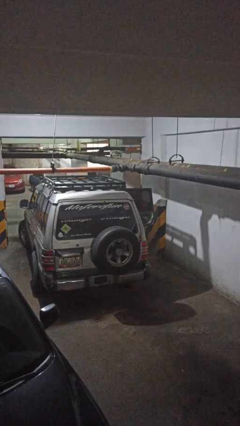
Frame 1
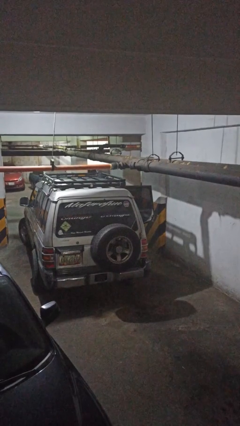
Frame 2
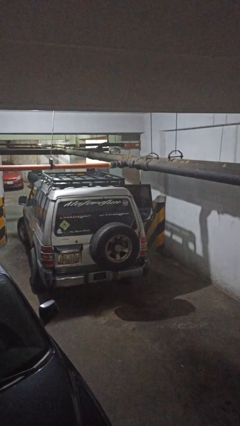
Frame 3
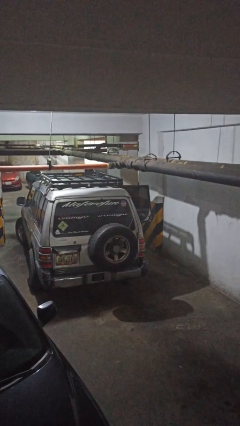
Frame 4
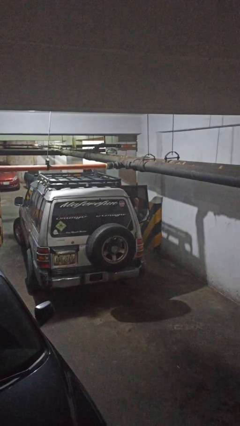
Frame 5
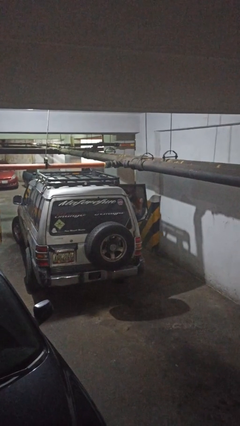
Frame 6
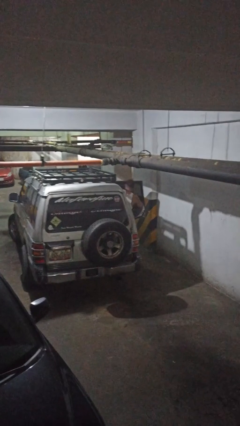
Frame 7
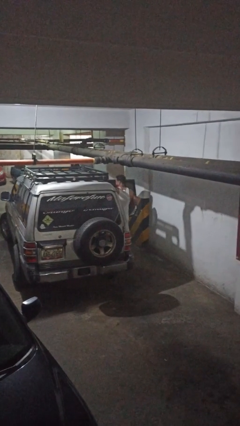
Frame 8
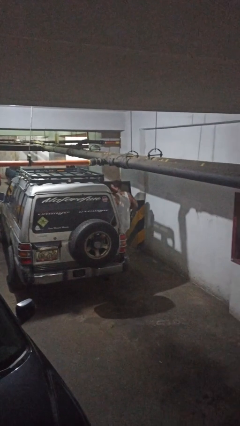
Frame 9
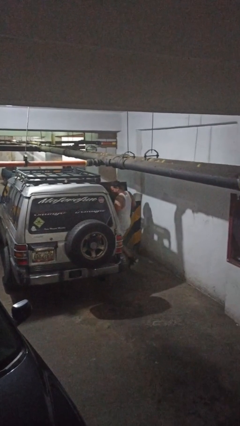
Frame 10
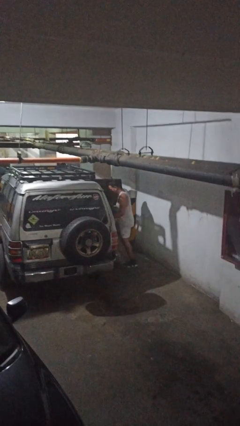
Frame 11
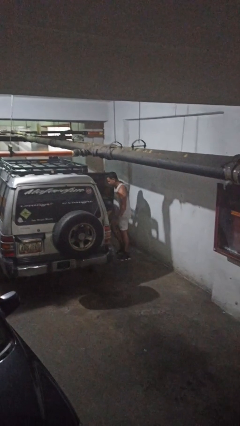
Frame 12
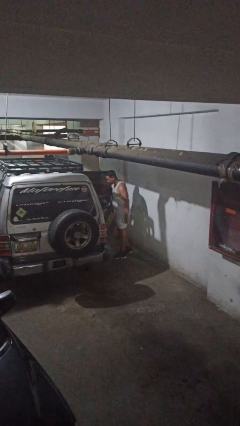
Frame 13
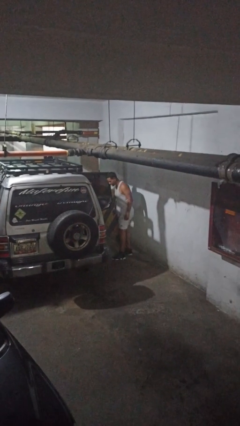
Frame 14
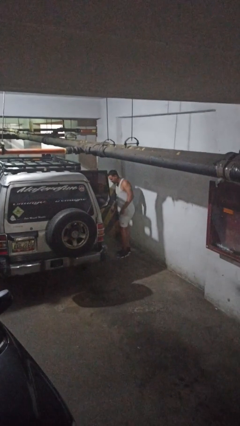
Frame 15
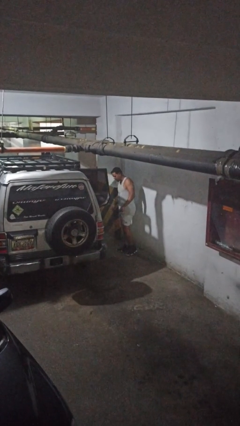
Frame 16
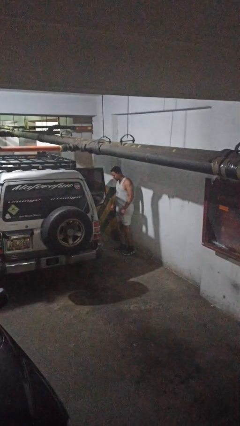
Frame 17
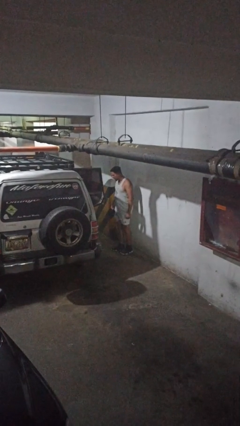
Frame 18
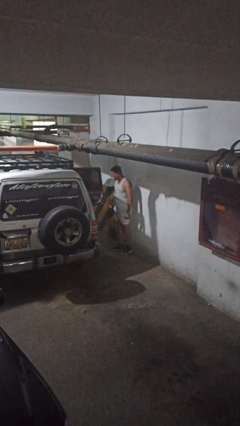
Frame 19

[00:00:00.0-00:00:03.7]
person exits car

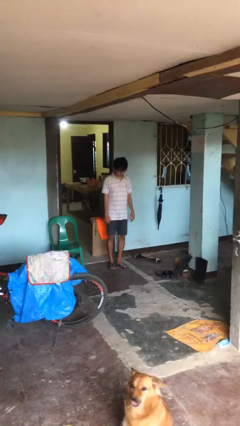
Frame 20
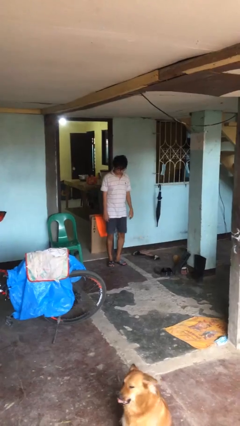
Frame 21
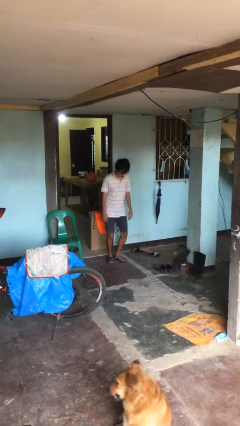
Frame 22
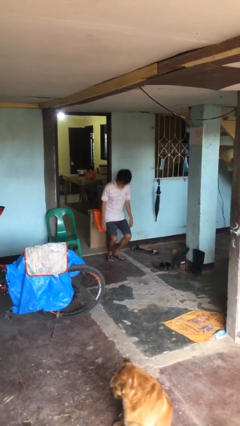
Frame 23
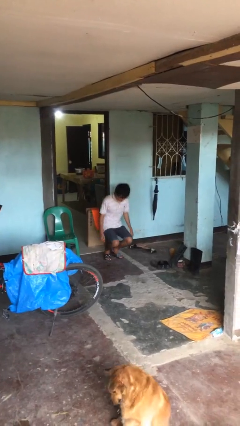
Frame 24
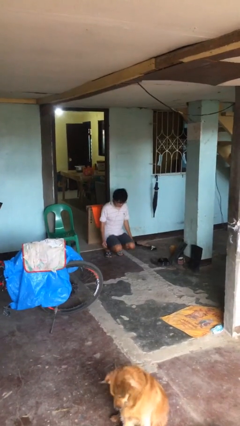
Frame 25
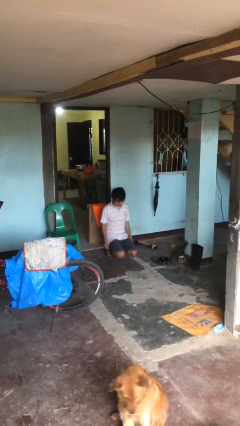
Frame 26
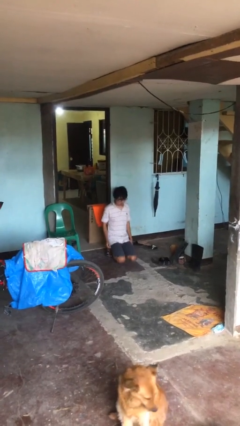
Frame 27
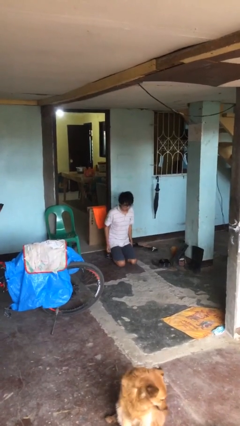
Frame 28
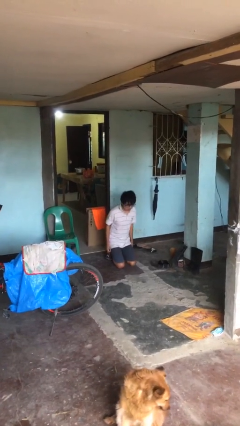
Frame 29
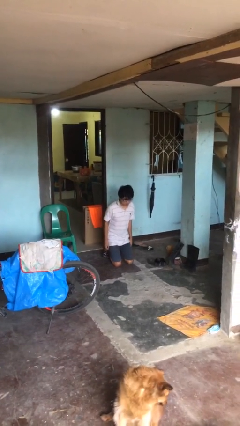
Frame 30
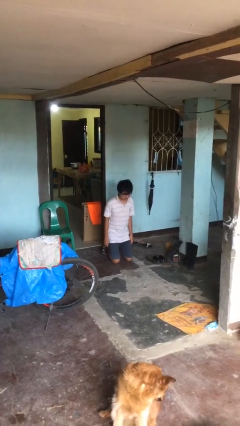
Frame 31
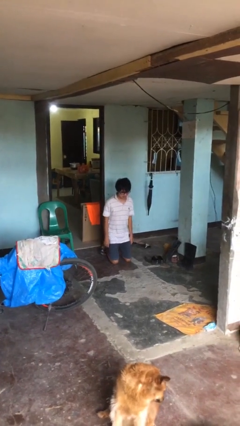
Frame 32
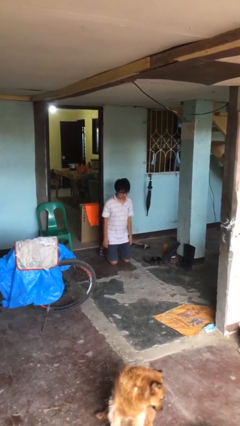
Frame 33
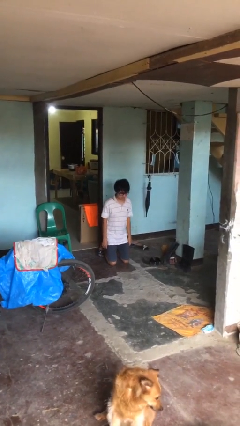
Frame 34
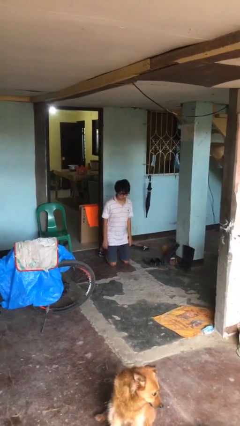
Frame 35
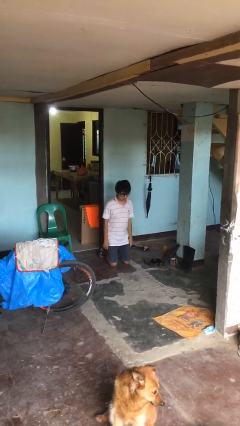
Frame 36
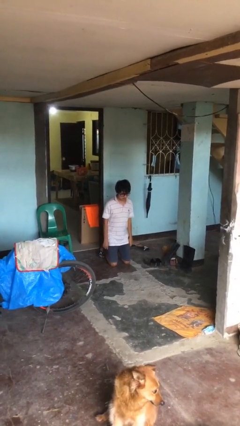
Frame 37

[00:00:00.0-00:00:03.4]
person kneels

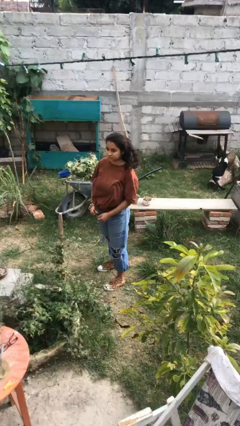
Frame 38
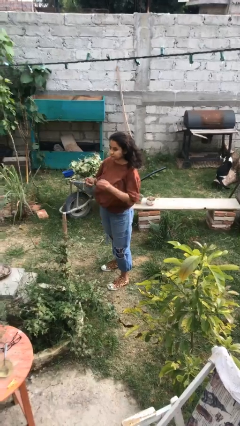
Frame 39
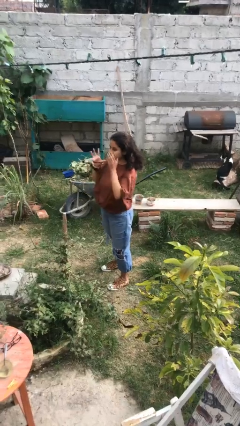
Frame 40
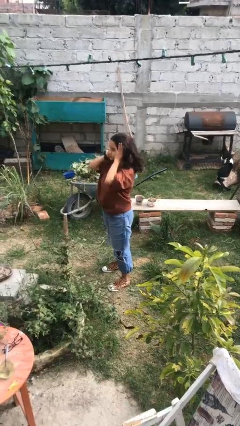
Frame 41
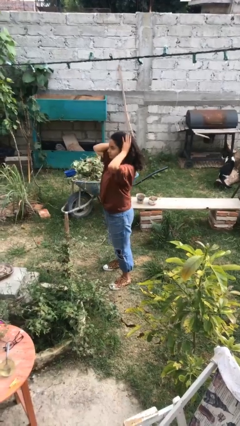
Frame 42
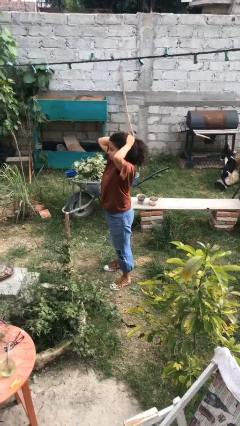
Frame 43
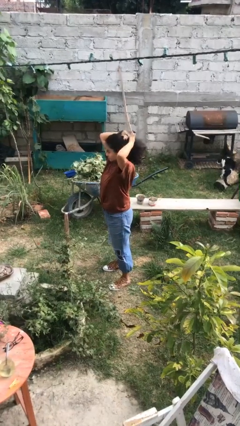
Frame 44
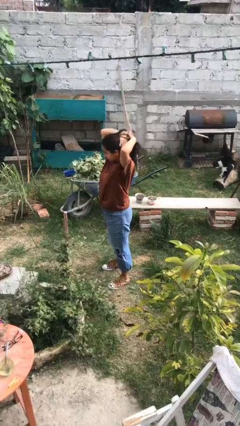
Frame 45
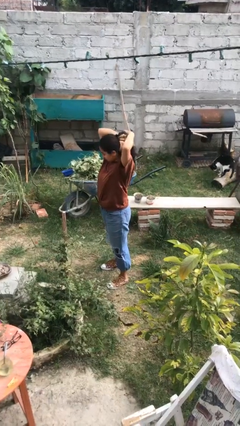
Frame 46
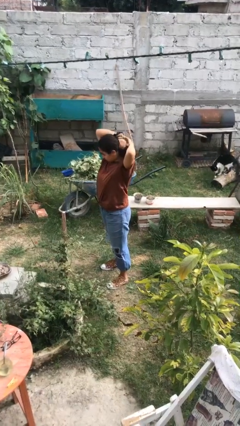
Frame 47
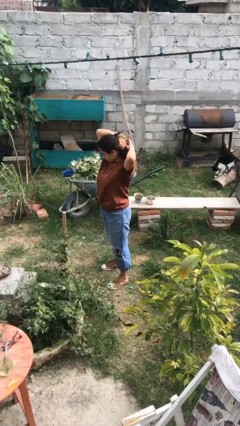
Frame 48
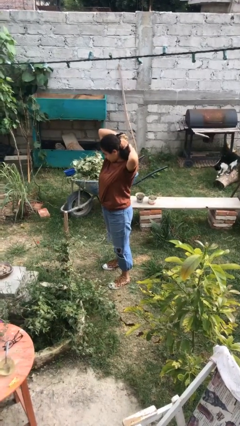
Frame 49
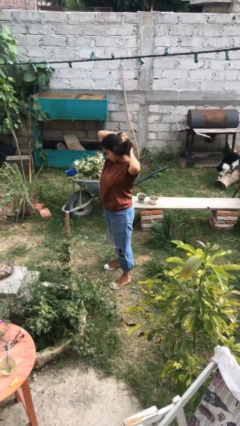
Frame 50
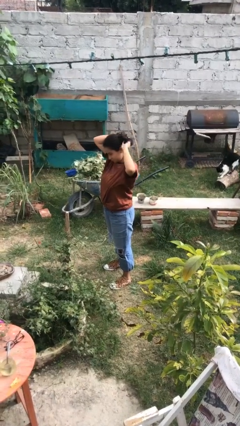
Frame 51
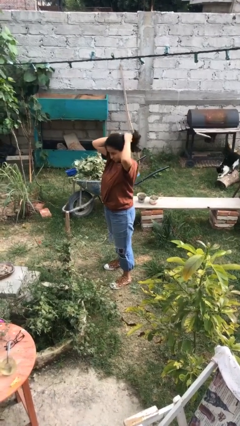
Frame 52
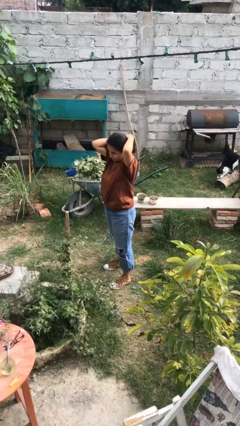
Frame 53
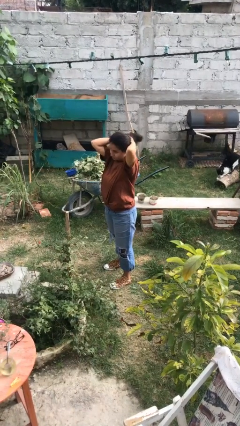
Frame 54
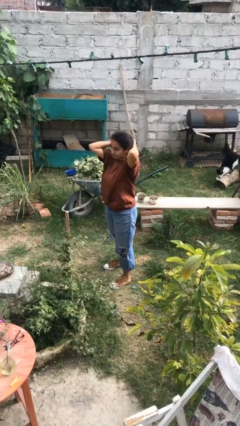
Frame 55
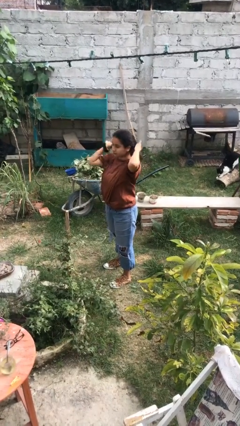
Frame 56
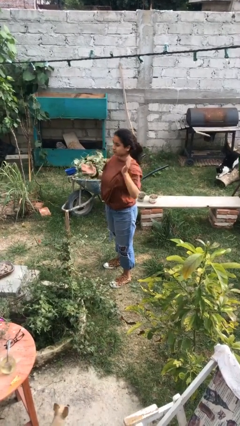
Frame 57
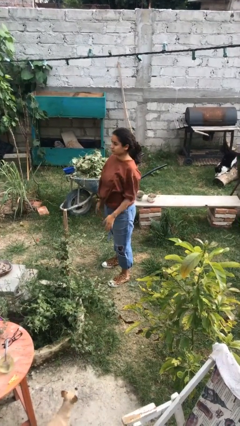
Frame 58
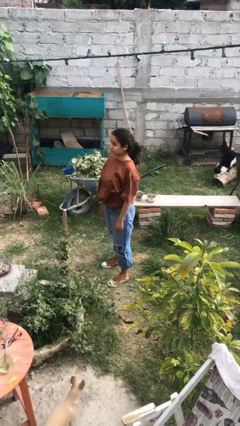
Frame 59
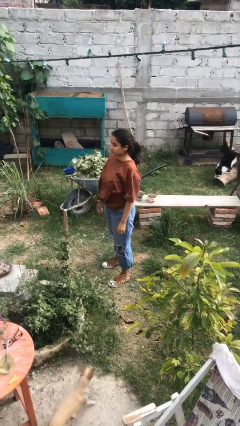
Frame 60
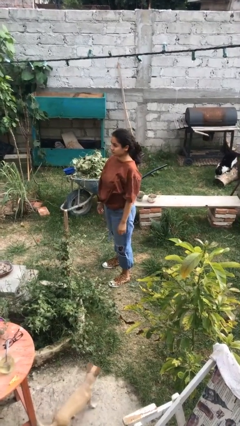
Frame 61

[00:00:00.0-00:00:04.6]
person puts hair in ponytail

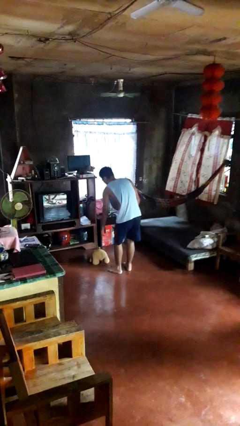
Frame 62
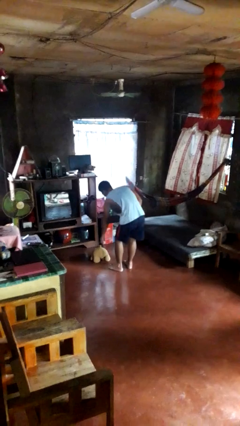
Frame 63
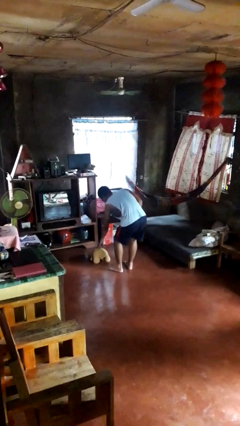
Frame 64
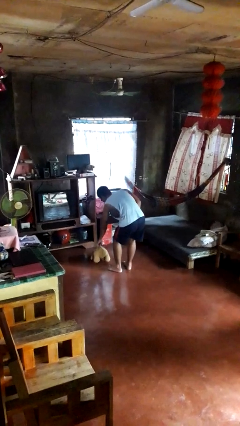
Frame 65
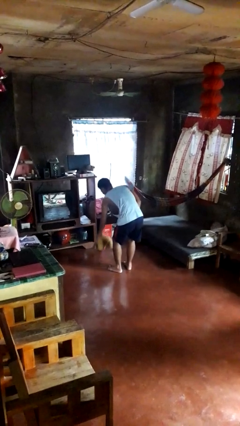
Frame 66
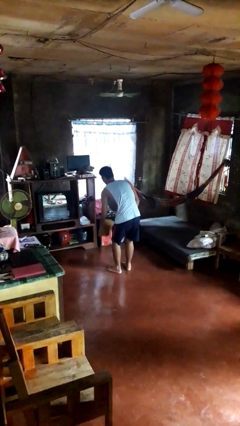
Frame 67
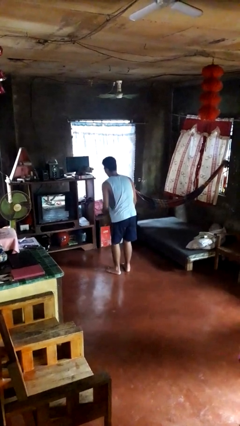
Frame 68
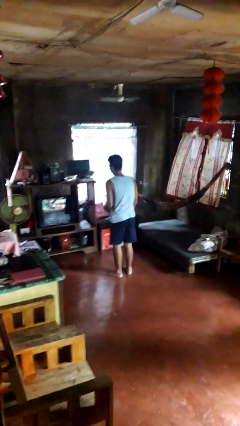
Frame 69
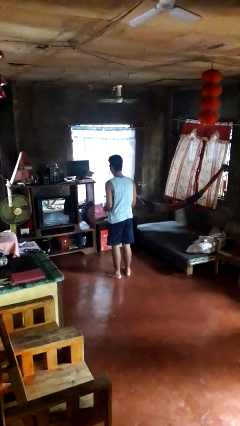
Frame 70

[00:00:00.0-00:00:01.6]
person picks up object from floor

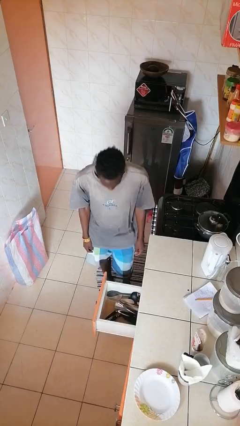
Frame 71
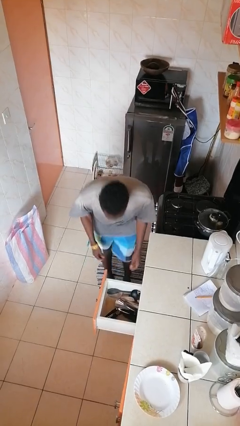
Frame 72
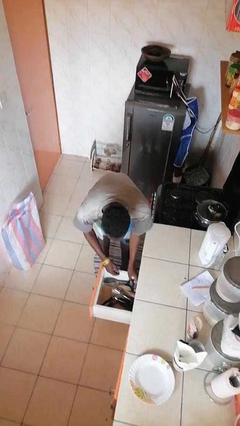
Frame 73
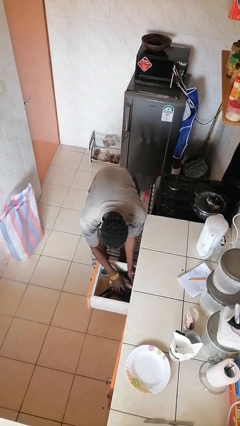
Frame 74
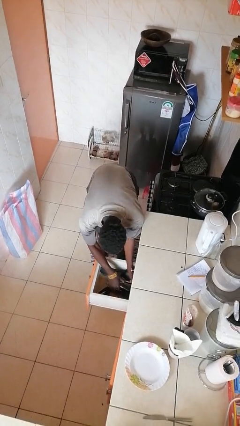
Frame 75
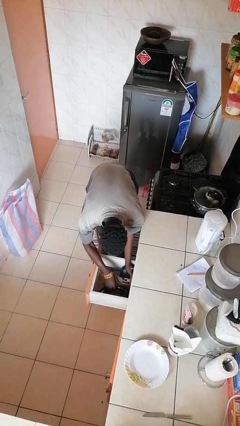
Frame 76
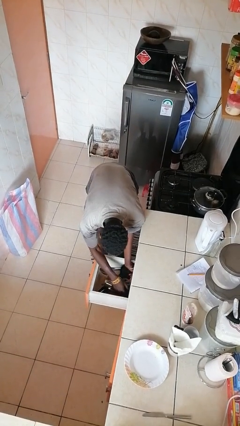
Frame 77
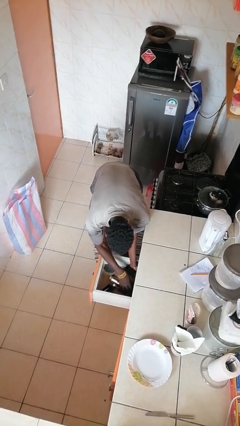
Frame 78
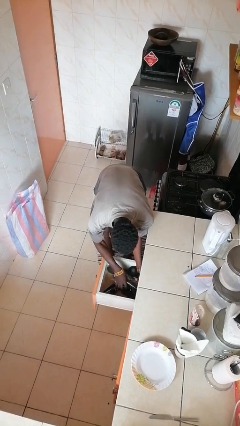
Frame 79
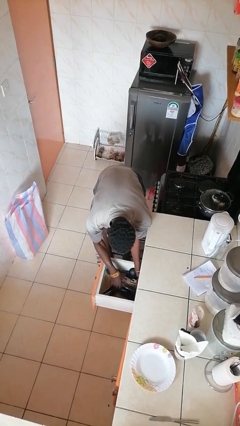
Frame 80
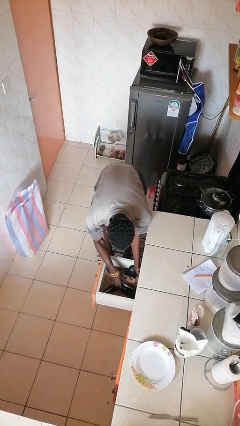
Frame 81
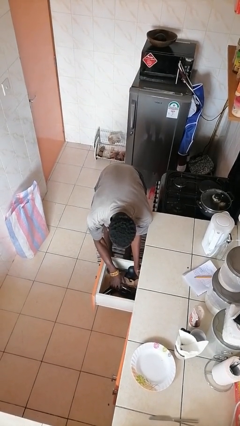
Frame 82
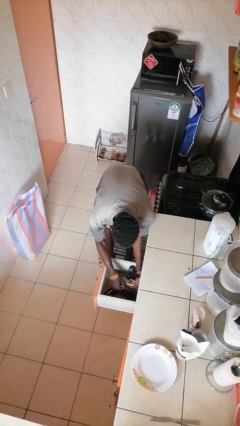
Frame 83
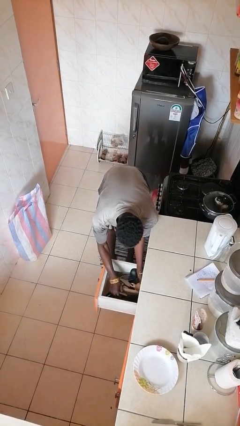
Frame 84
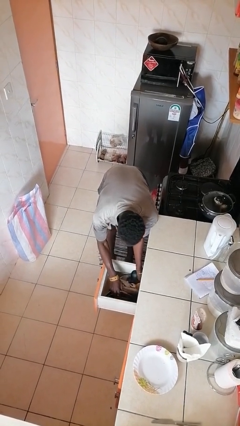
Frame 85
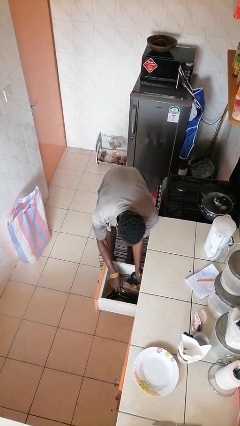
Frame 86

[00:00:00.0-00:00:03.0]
person searches in kitchen drawer

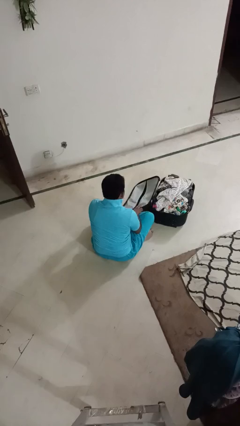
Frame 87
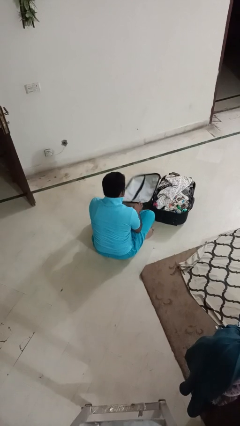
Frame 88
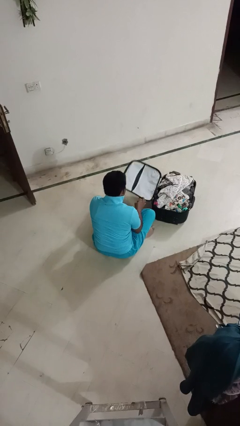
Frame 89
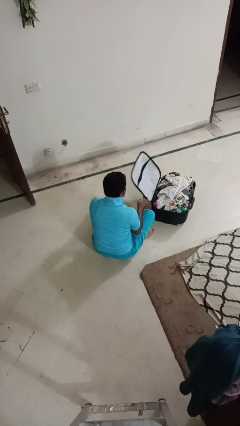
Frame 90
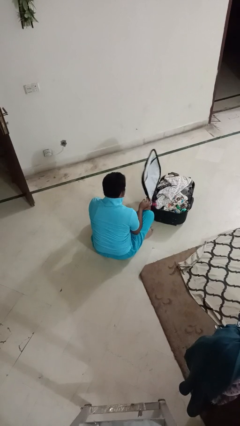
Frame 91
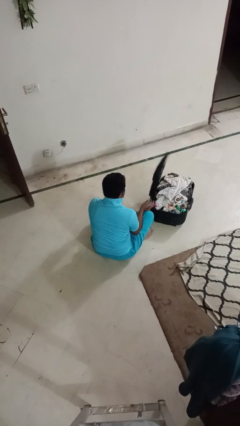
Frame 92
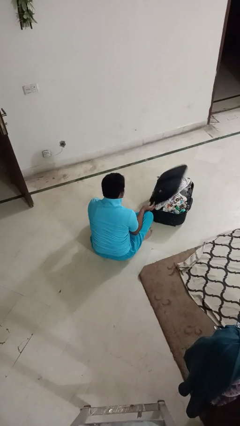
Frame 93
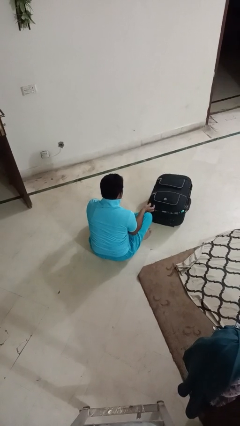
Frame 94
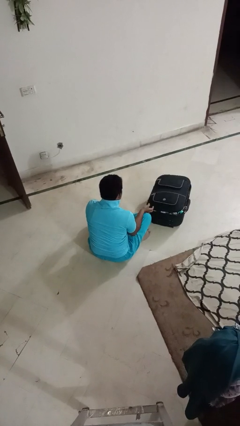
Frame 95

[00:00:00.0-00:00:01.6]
person closes suitcase
